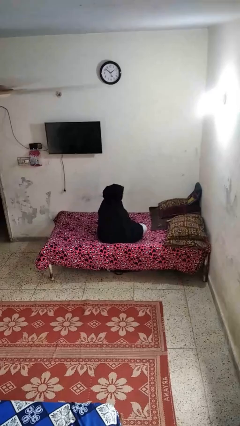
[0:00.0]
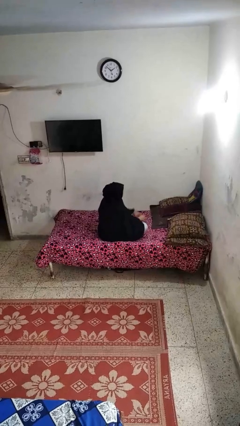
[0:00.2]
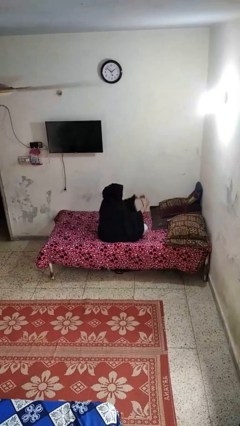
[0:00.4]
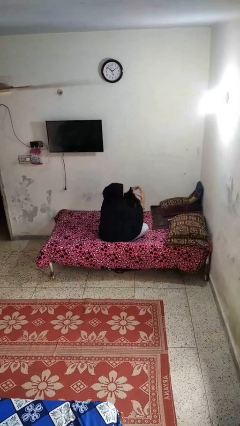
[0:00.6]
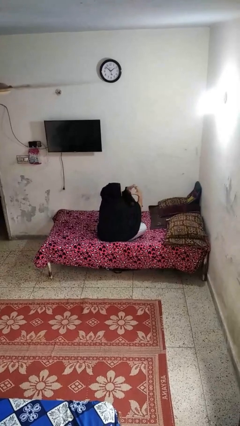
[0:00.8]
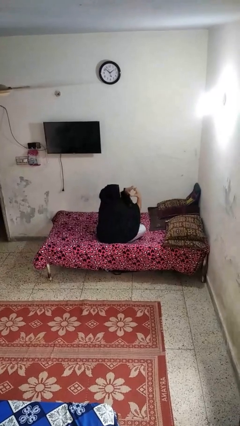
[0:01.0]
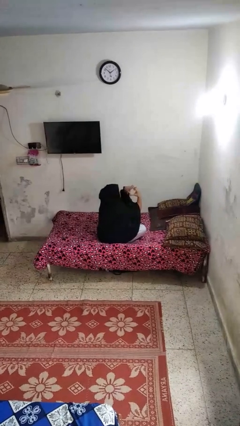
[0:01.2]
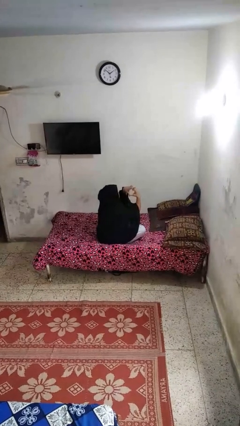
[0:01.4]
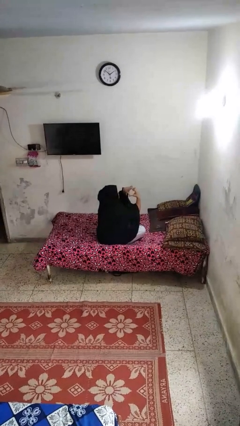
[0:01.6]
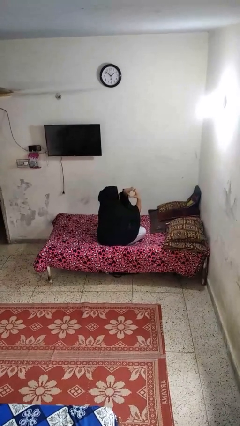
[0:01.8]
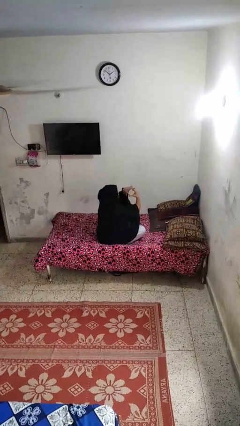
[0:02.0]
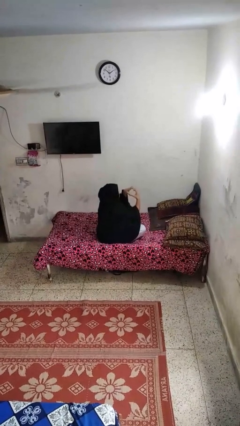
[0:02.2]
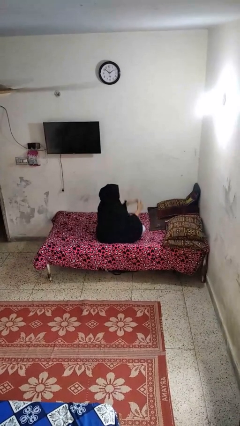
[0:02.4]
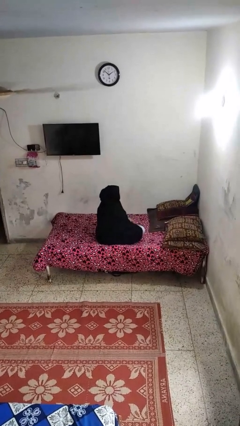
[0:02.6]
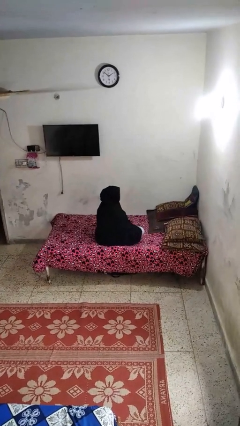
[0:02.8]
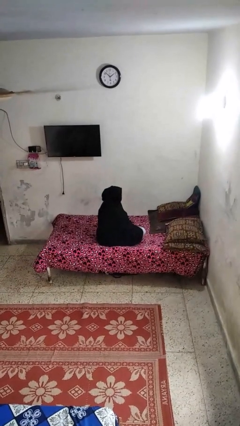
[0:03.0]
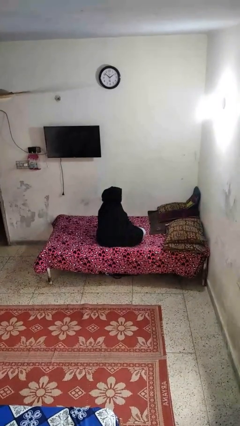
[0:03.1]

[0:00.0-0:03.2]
person gestures heart

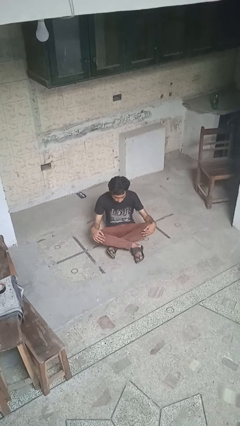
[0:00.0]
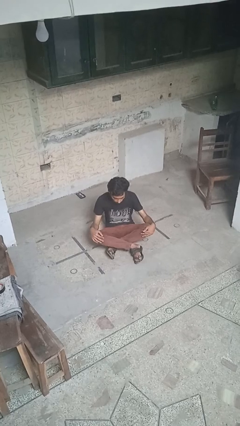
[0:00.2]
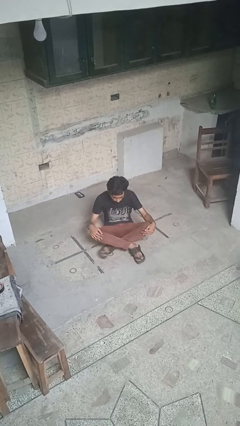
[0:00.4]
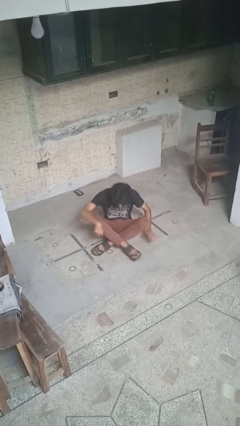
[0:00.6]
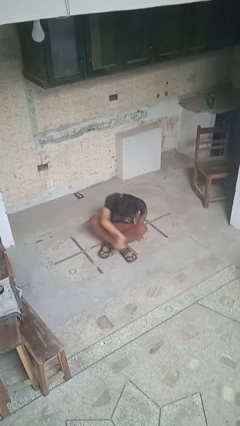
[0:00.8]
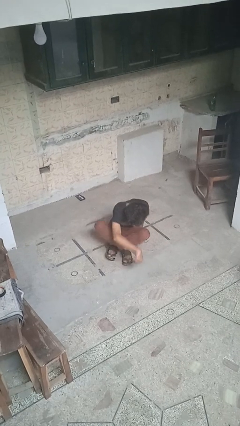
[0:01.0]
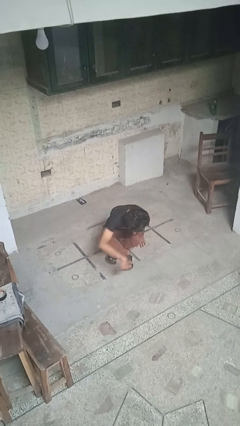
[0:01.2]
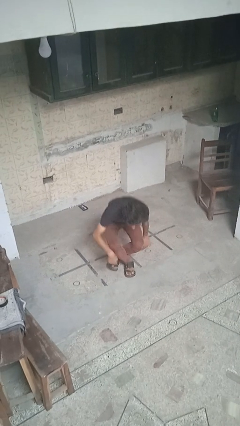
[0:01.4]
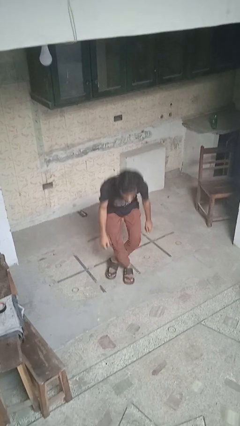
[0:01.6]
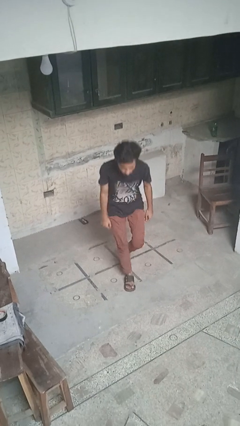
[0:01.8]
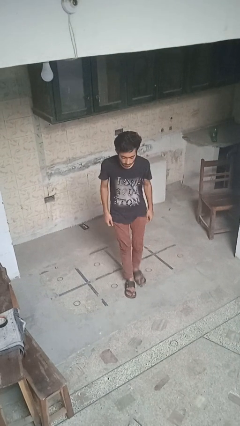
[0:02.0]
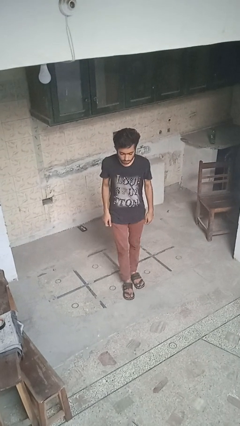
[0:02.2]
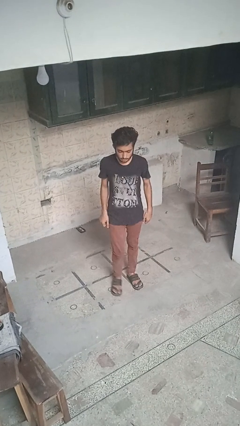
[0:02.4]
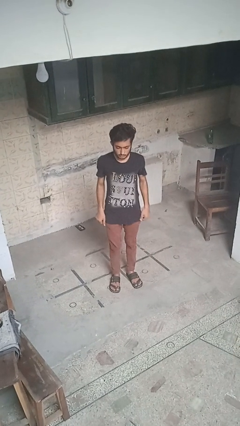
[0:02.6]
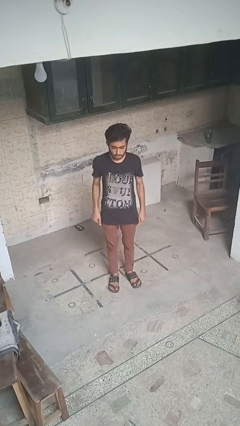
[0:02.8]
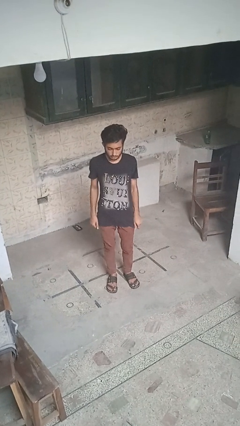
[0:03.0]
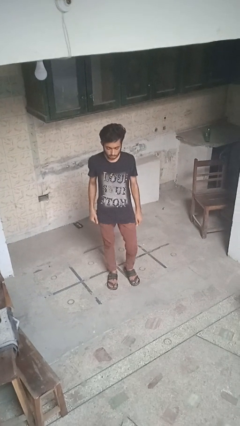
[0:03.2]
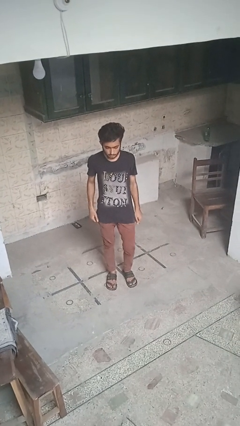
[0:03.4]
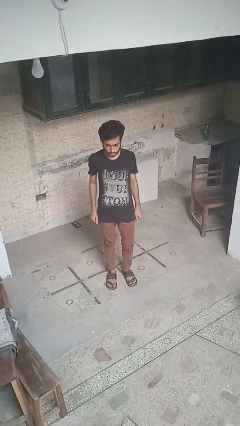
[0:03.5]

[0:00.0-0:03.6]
person stands up from floor

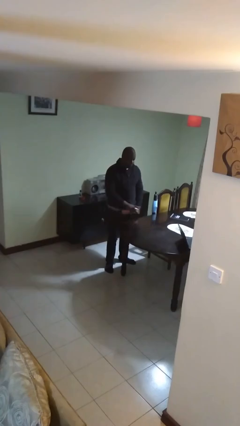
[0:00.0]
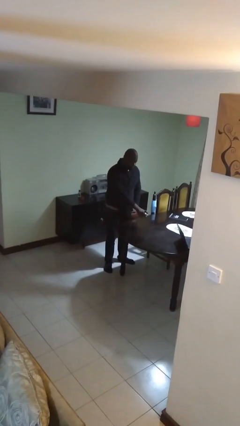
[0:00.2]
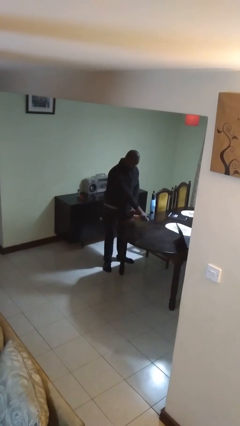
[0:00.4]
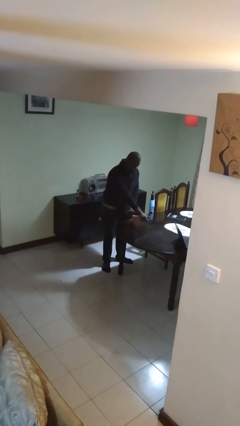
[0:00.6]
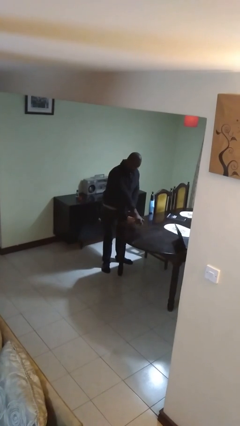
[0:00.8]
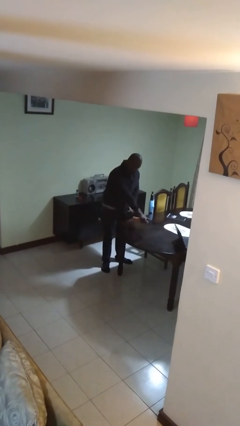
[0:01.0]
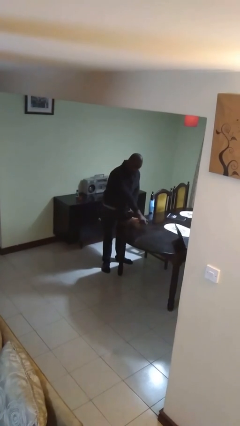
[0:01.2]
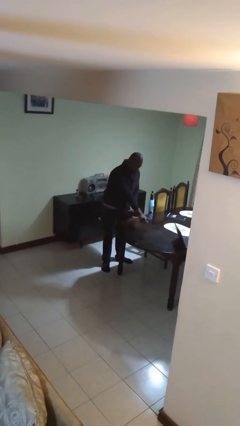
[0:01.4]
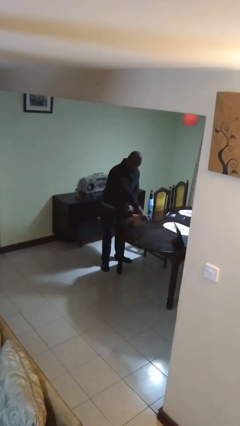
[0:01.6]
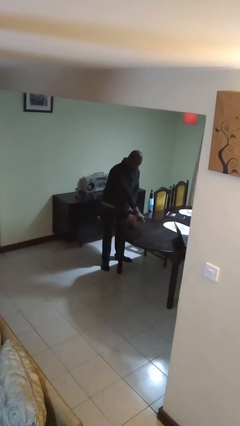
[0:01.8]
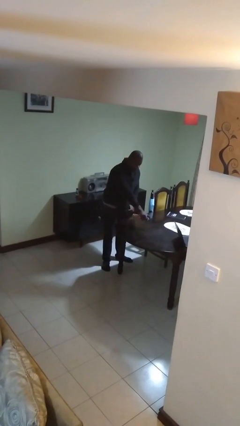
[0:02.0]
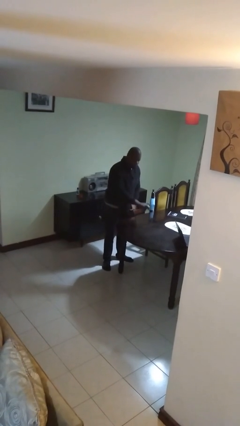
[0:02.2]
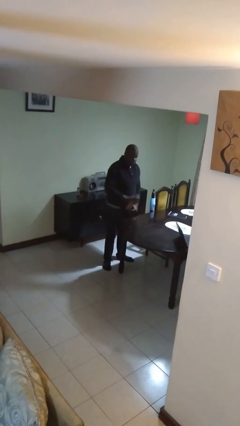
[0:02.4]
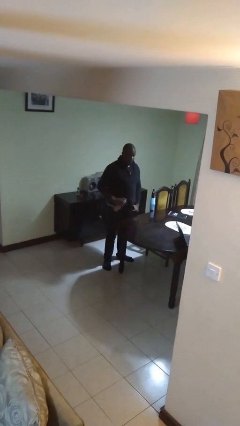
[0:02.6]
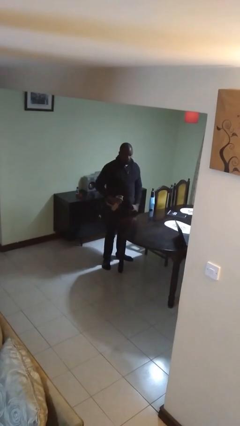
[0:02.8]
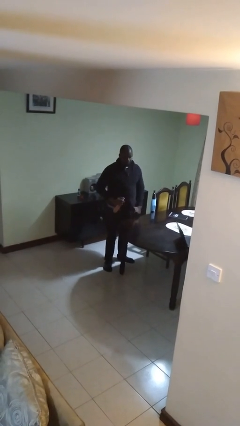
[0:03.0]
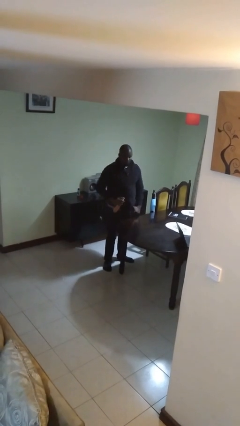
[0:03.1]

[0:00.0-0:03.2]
person sprays from bottle

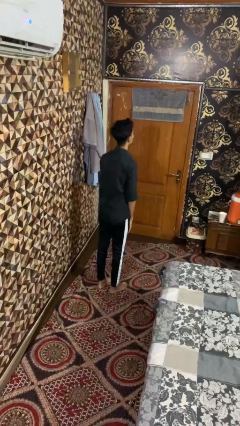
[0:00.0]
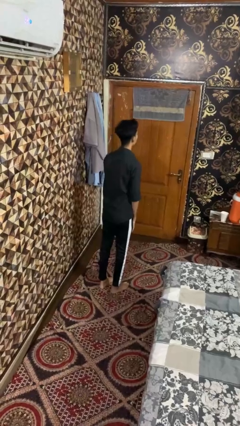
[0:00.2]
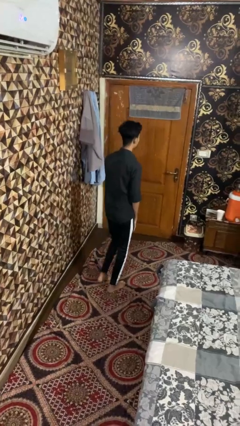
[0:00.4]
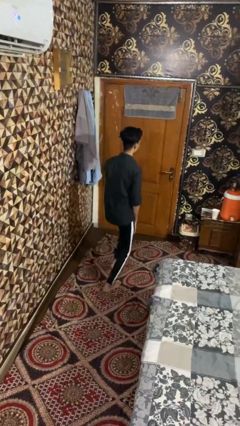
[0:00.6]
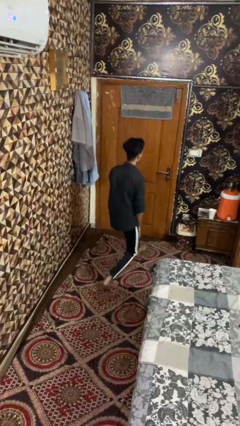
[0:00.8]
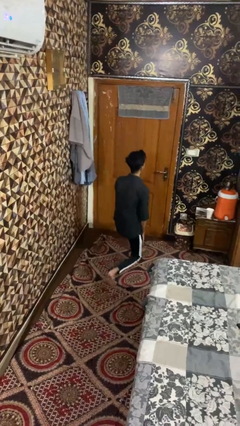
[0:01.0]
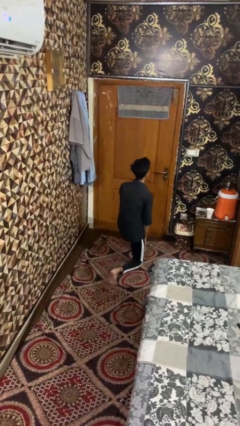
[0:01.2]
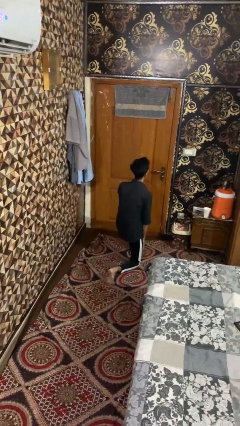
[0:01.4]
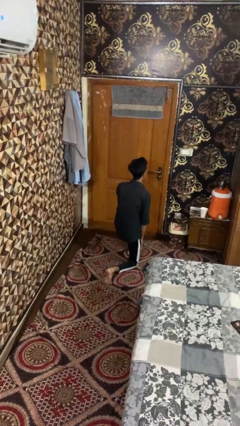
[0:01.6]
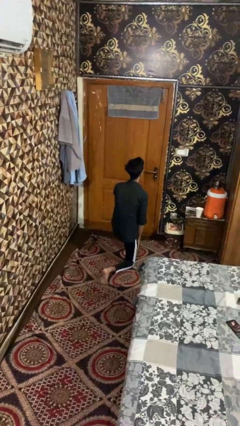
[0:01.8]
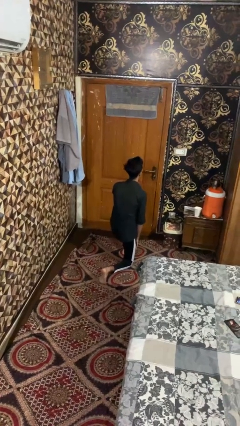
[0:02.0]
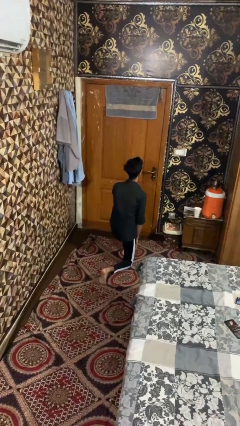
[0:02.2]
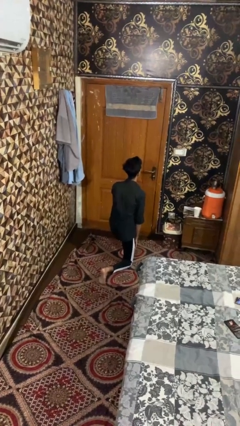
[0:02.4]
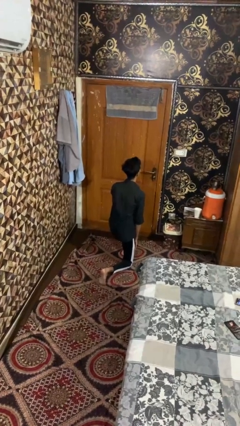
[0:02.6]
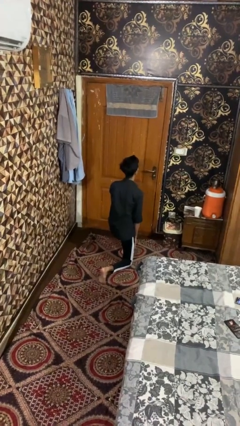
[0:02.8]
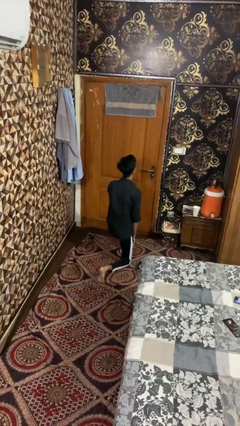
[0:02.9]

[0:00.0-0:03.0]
person exercises with lunges

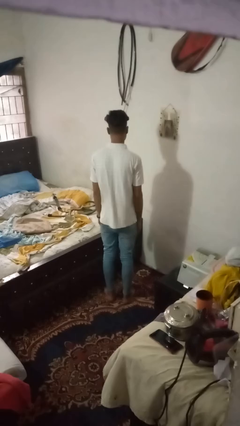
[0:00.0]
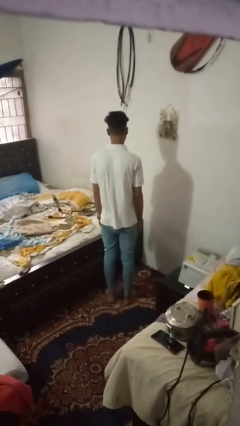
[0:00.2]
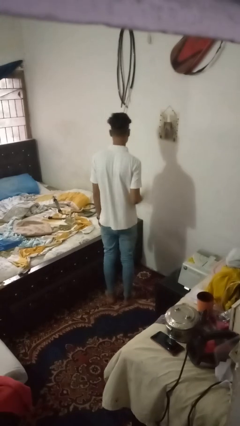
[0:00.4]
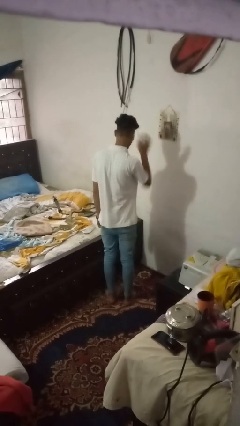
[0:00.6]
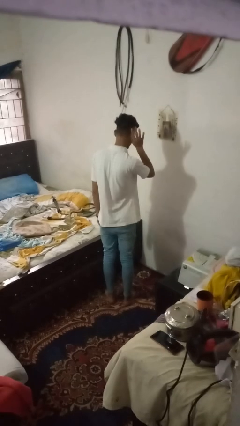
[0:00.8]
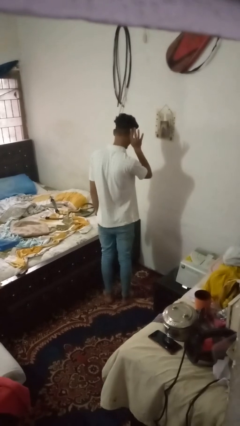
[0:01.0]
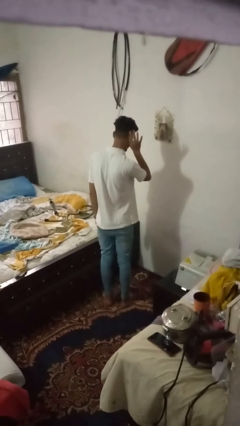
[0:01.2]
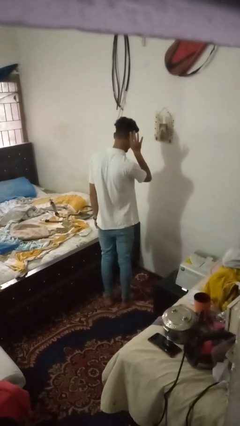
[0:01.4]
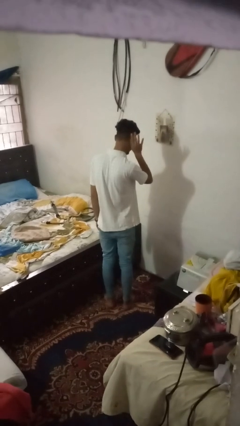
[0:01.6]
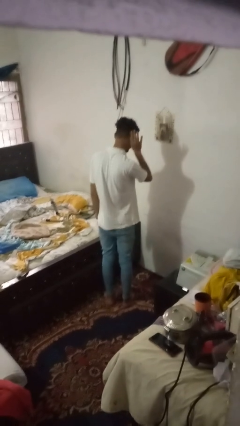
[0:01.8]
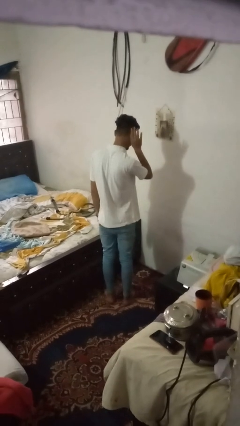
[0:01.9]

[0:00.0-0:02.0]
person gestures listen closely

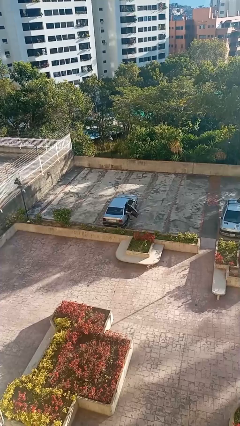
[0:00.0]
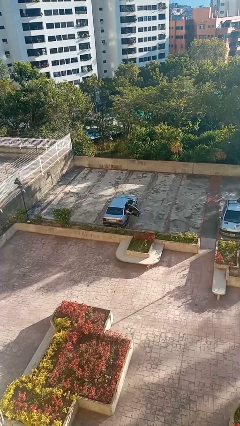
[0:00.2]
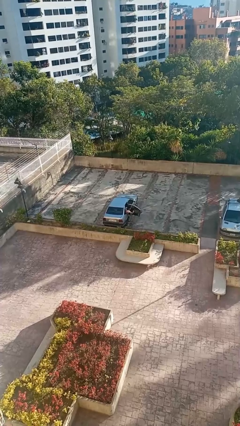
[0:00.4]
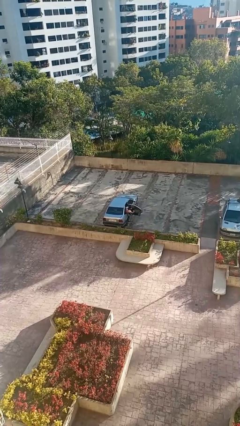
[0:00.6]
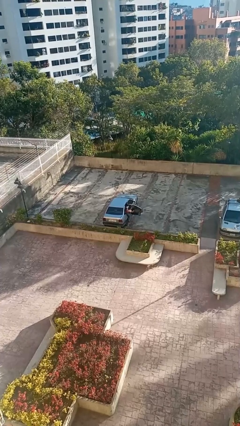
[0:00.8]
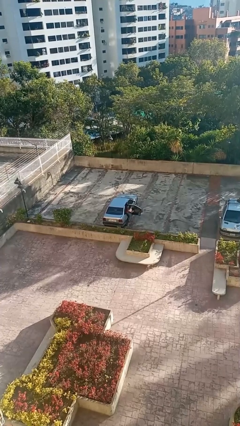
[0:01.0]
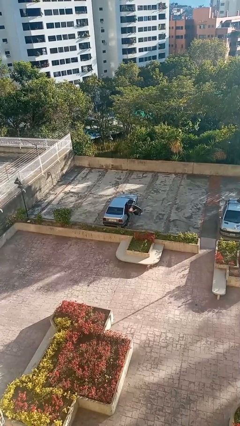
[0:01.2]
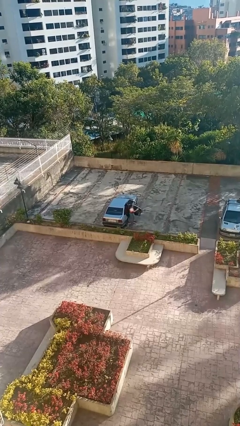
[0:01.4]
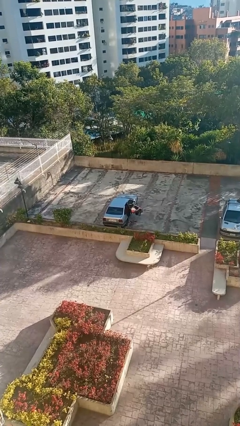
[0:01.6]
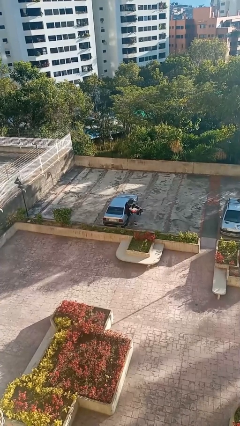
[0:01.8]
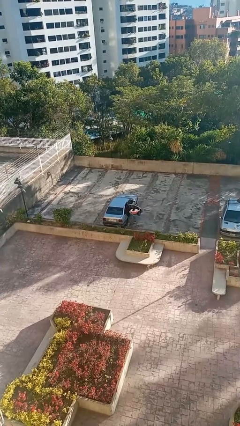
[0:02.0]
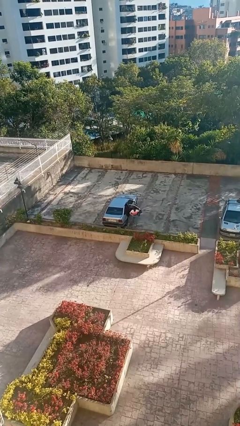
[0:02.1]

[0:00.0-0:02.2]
car drops off person

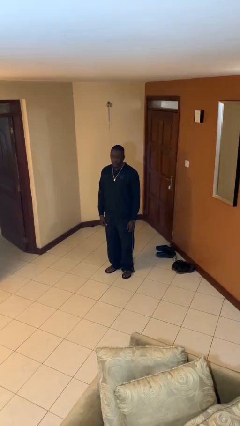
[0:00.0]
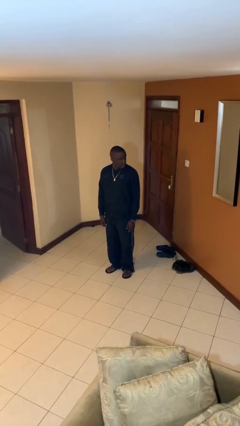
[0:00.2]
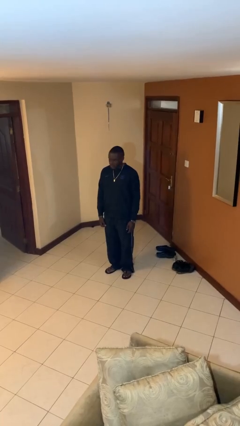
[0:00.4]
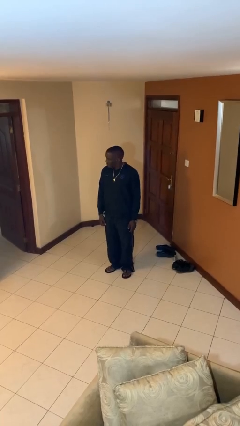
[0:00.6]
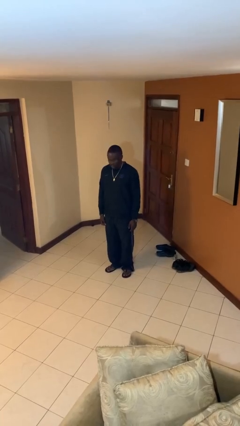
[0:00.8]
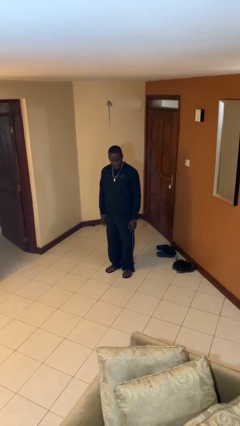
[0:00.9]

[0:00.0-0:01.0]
person shakes head
